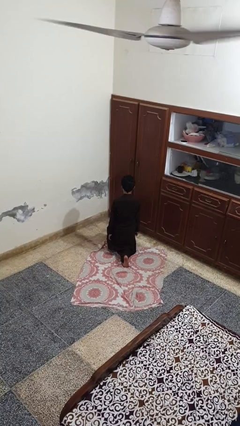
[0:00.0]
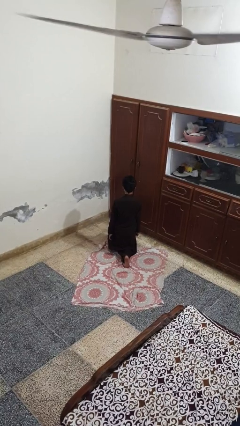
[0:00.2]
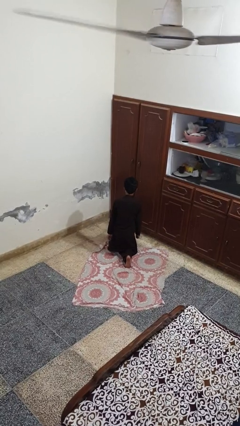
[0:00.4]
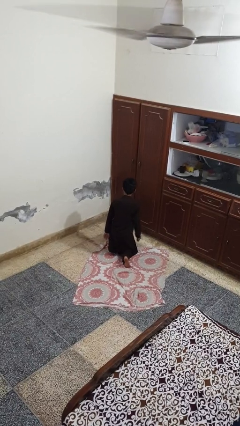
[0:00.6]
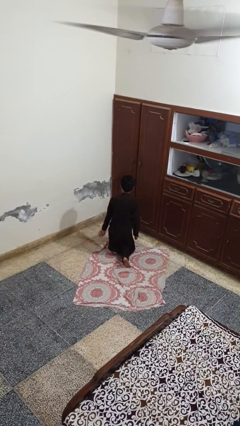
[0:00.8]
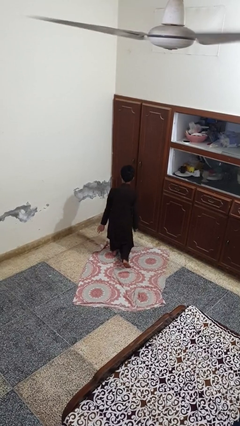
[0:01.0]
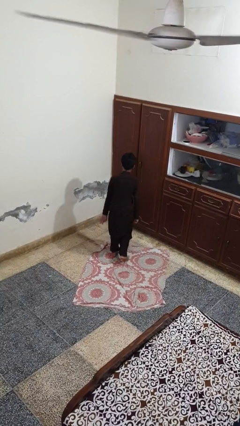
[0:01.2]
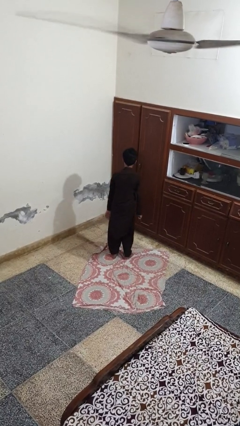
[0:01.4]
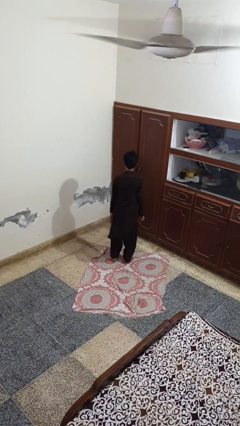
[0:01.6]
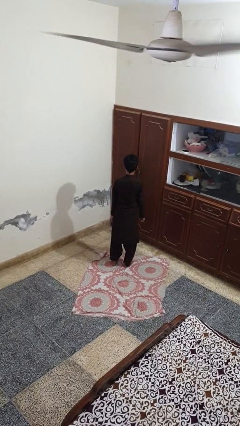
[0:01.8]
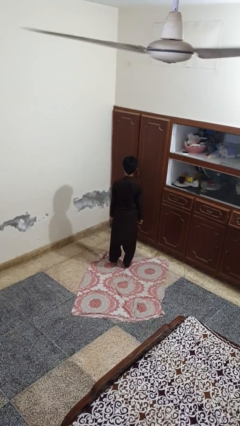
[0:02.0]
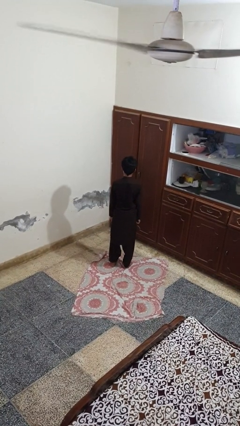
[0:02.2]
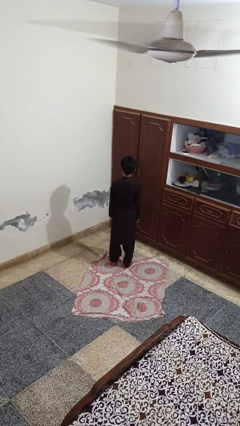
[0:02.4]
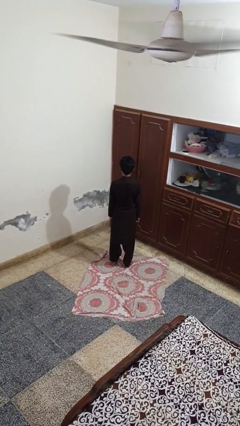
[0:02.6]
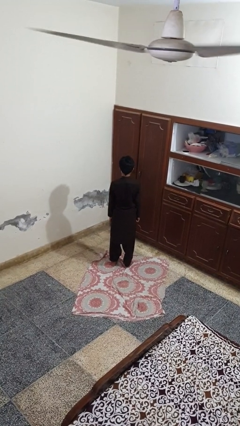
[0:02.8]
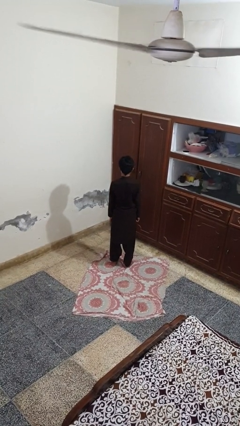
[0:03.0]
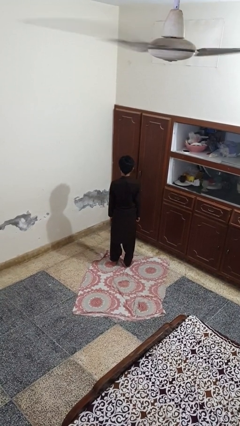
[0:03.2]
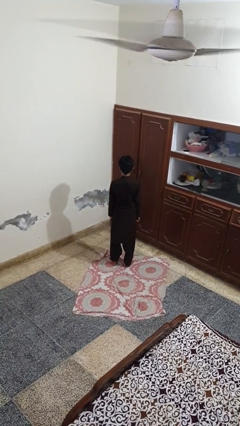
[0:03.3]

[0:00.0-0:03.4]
person stands up from floor

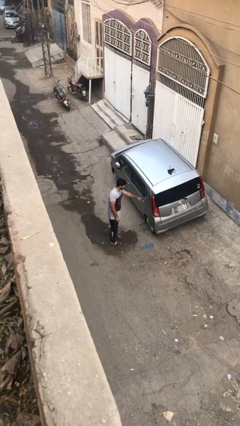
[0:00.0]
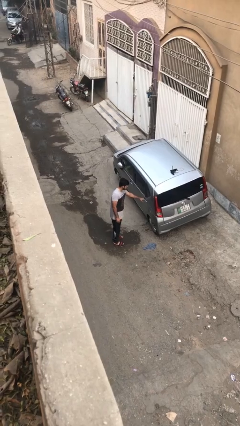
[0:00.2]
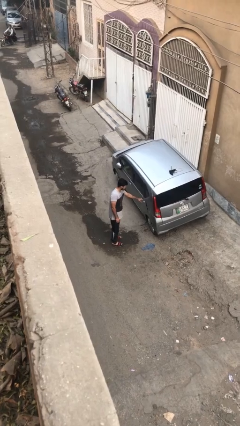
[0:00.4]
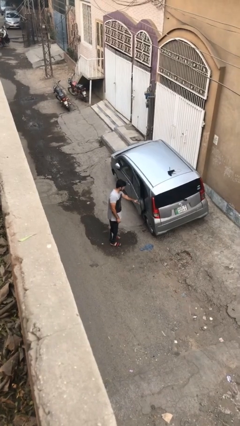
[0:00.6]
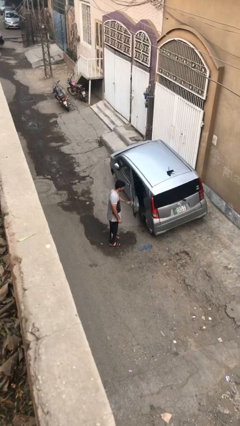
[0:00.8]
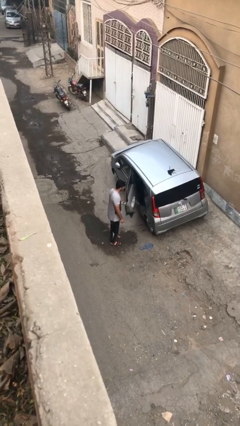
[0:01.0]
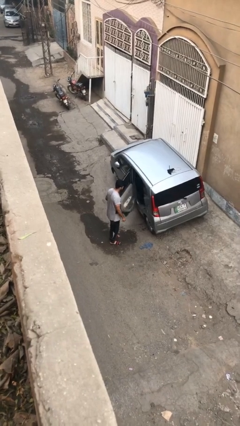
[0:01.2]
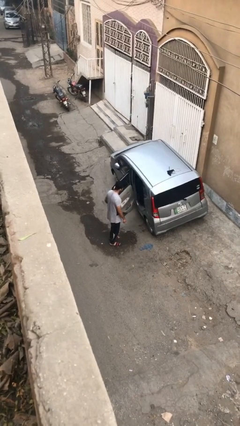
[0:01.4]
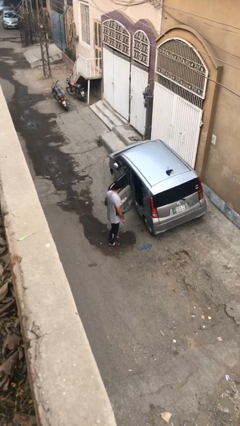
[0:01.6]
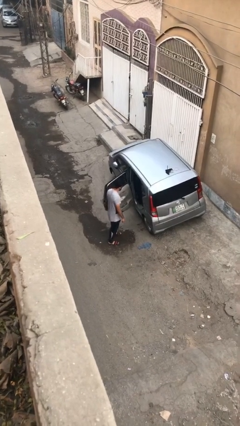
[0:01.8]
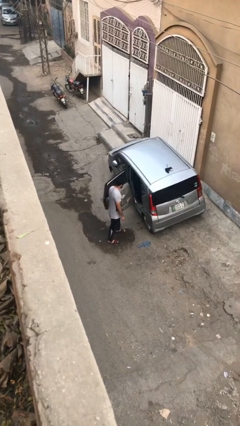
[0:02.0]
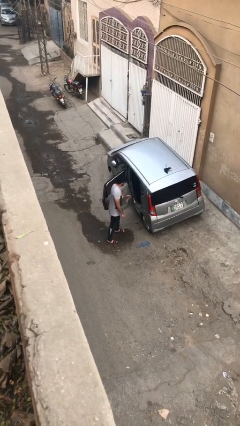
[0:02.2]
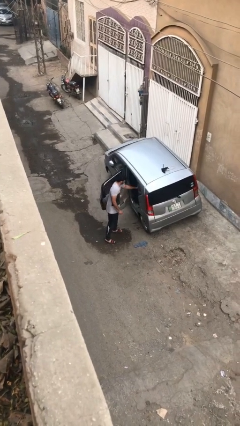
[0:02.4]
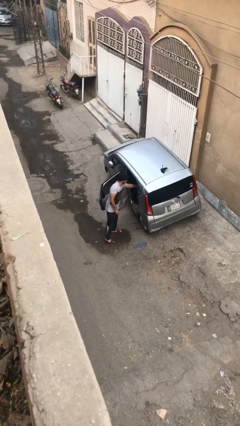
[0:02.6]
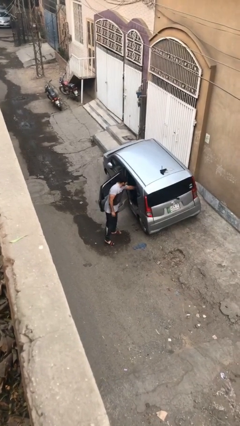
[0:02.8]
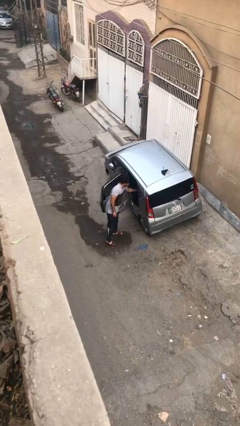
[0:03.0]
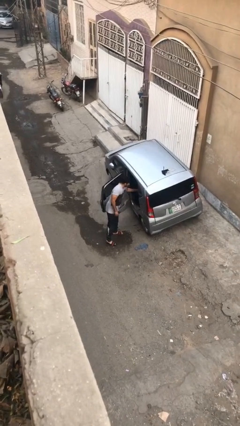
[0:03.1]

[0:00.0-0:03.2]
person opens car door

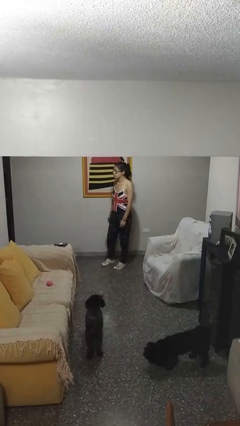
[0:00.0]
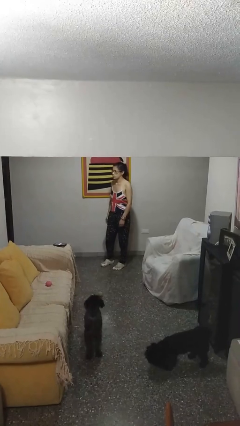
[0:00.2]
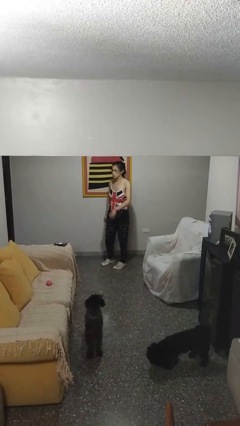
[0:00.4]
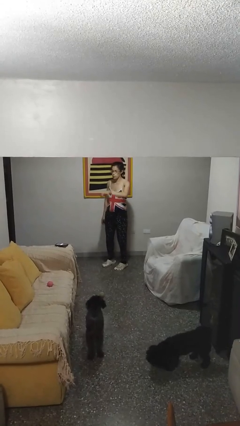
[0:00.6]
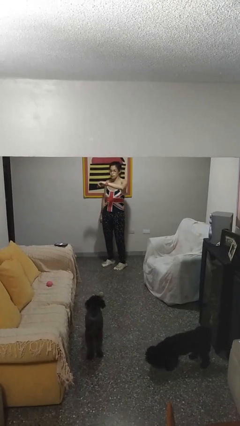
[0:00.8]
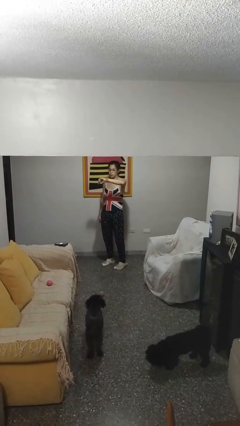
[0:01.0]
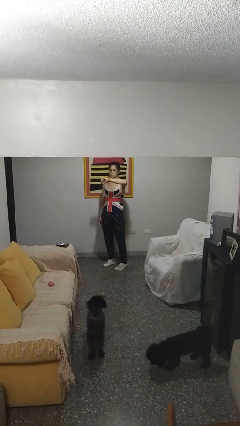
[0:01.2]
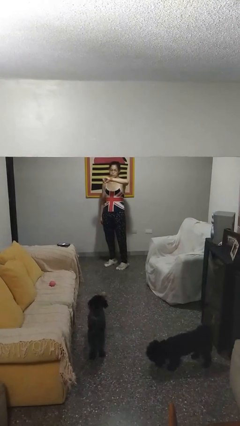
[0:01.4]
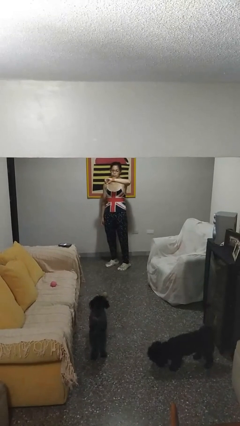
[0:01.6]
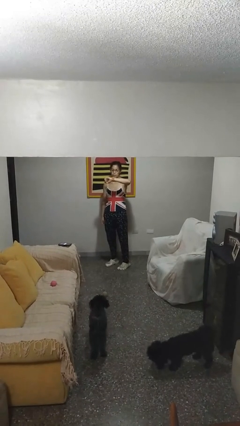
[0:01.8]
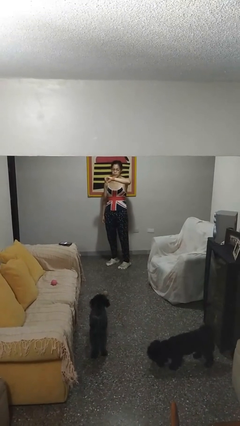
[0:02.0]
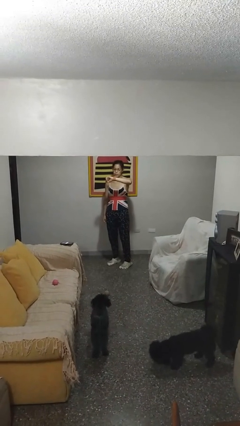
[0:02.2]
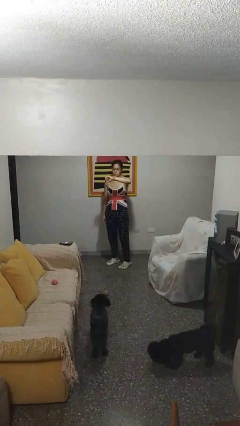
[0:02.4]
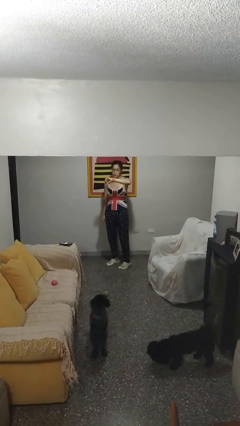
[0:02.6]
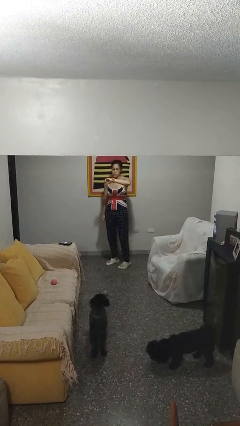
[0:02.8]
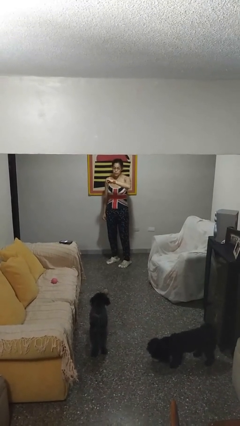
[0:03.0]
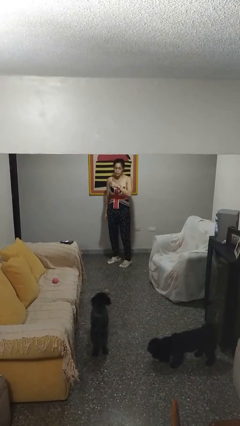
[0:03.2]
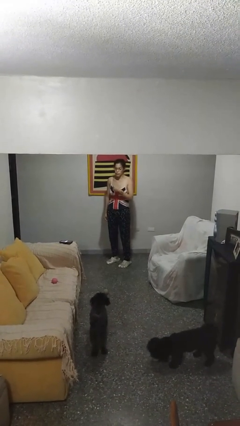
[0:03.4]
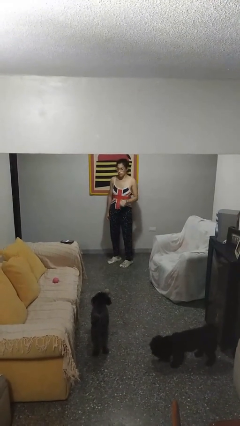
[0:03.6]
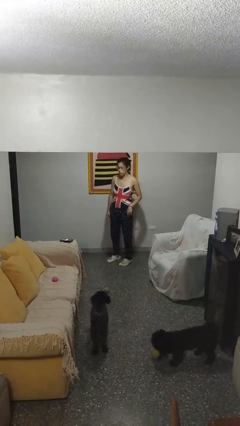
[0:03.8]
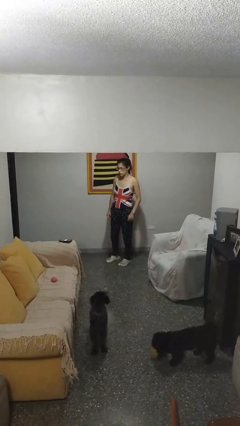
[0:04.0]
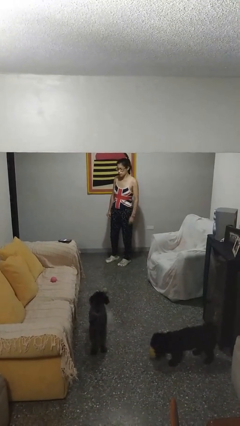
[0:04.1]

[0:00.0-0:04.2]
person looks at wristwatch

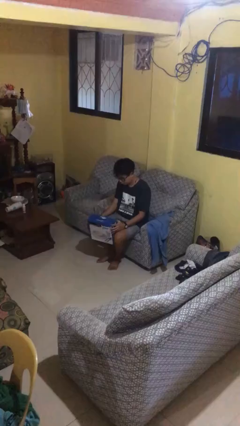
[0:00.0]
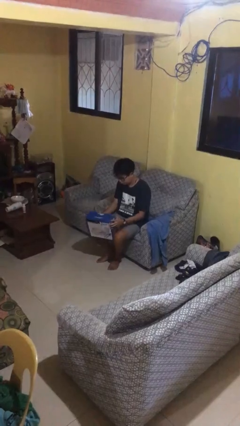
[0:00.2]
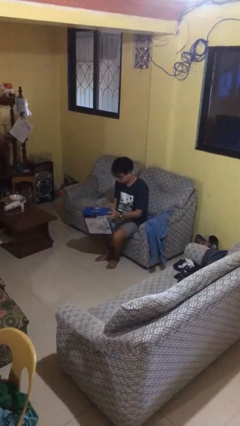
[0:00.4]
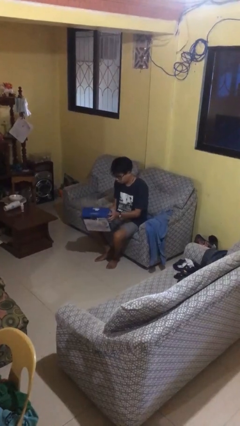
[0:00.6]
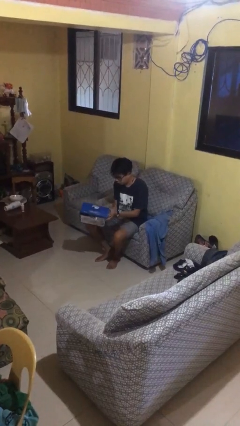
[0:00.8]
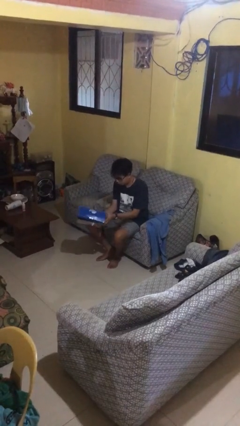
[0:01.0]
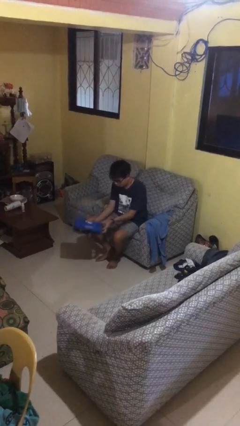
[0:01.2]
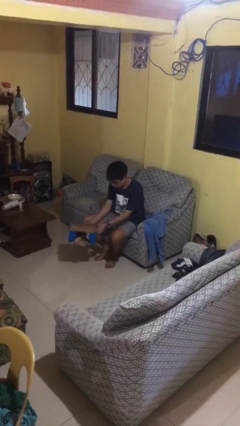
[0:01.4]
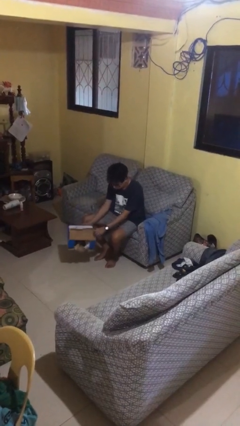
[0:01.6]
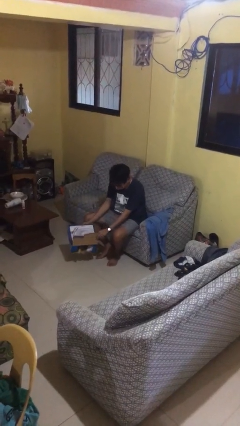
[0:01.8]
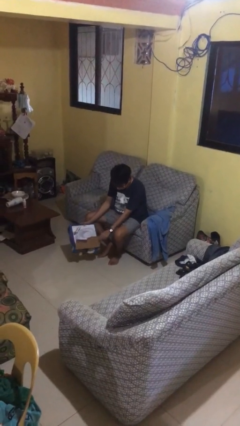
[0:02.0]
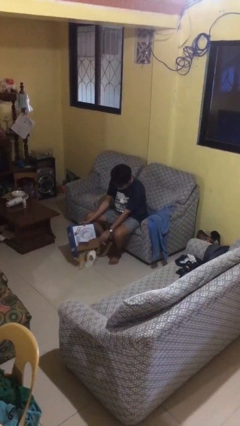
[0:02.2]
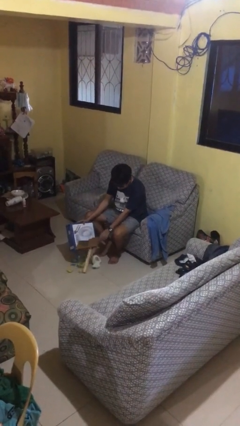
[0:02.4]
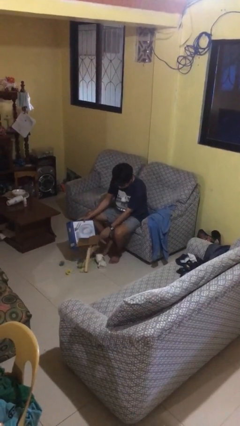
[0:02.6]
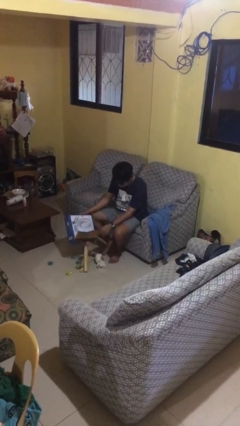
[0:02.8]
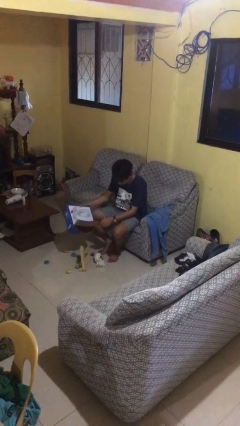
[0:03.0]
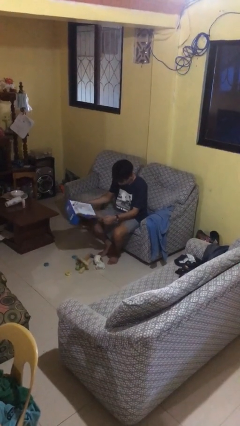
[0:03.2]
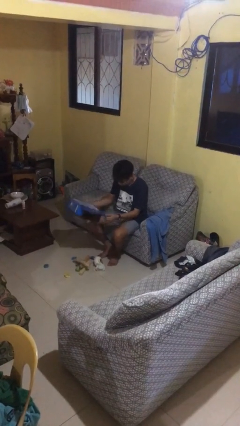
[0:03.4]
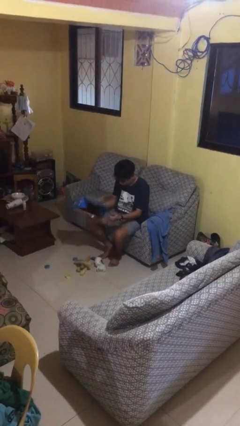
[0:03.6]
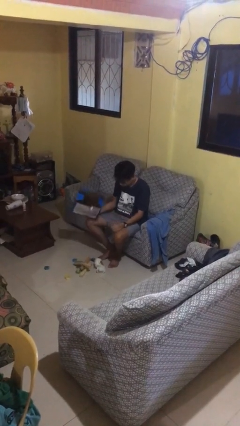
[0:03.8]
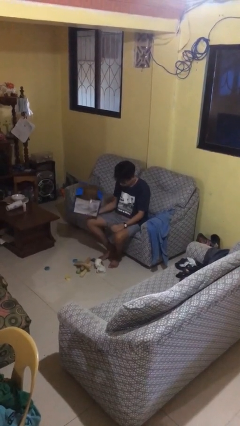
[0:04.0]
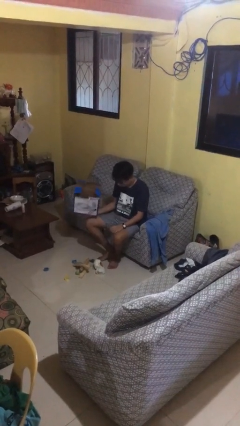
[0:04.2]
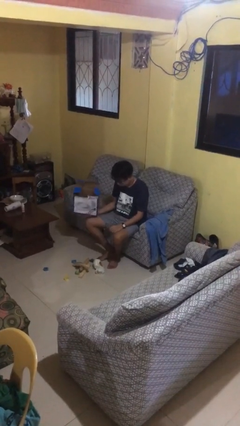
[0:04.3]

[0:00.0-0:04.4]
person unloads box onto floor

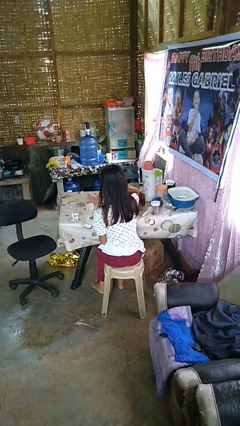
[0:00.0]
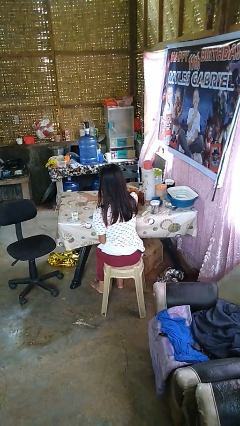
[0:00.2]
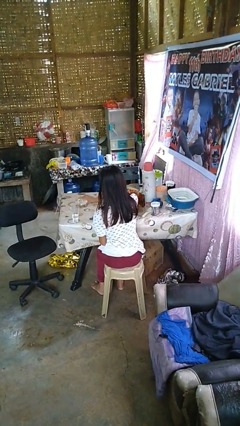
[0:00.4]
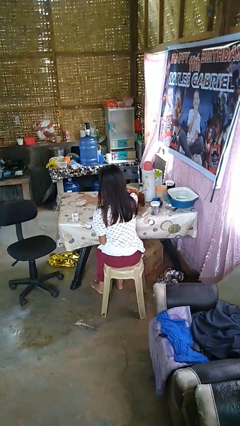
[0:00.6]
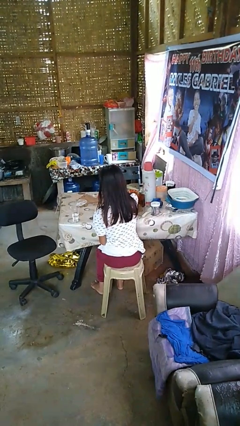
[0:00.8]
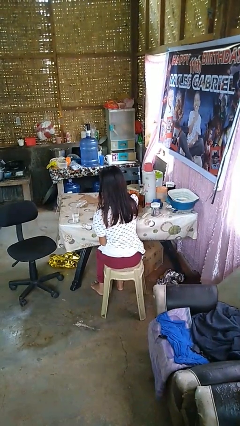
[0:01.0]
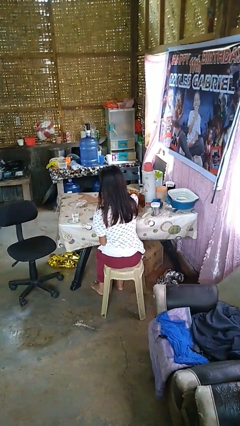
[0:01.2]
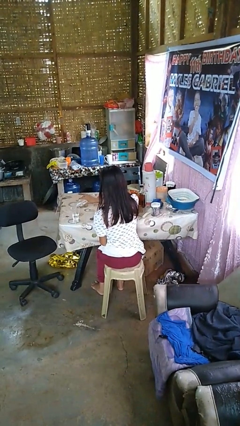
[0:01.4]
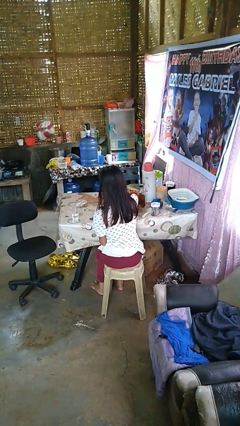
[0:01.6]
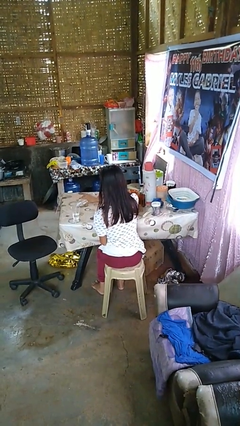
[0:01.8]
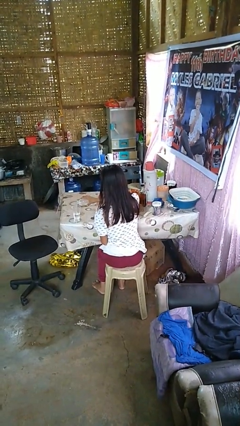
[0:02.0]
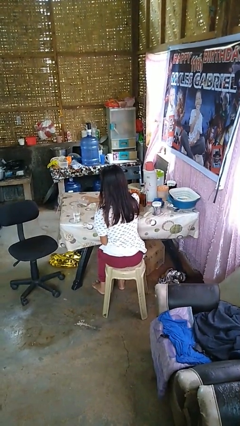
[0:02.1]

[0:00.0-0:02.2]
person pours liquid into cup

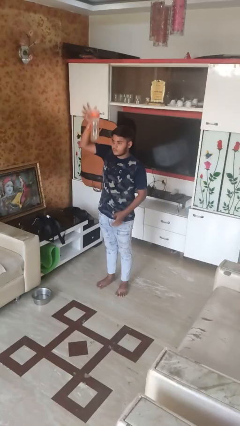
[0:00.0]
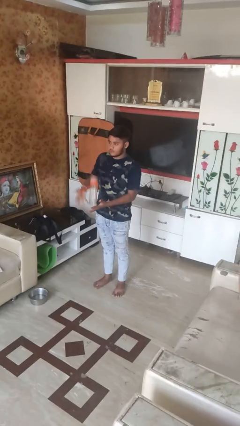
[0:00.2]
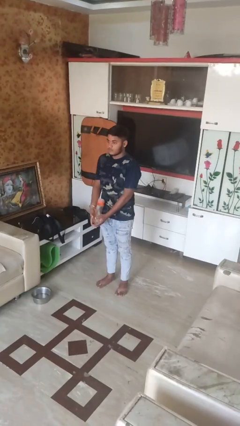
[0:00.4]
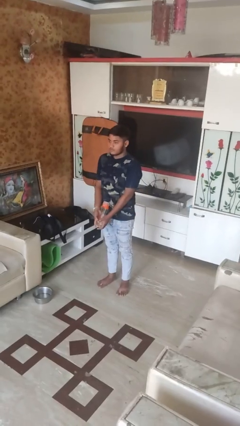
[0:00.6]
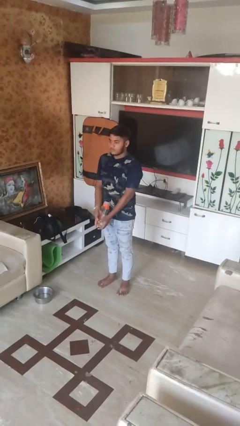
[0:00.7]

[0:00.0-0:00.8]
person catches dropped object
